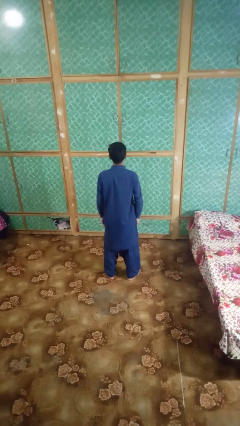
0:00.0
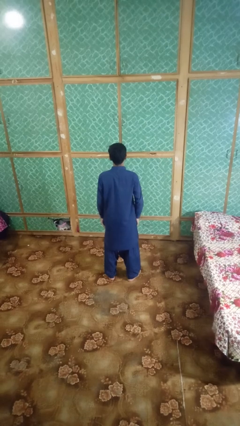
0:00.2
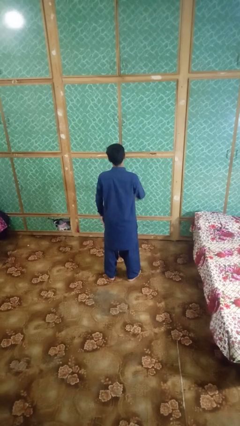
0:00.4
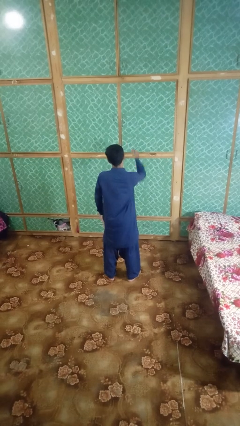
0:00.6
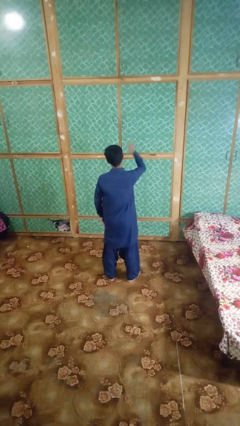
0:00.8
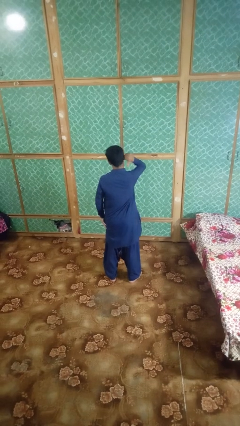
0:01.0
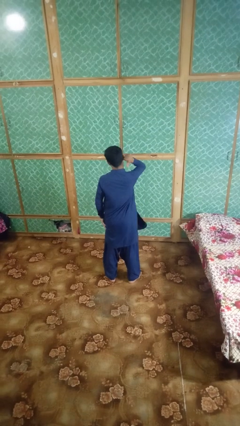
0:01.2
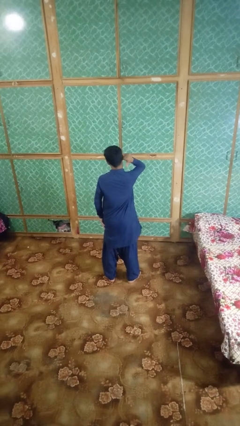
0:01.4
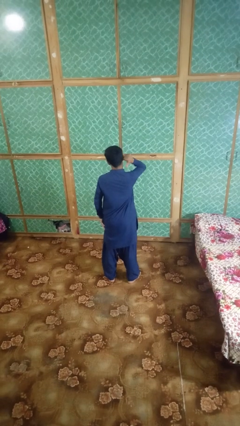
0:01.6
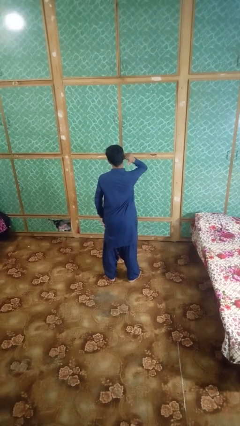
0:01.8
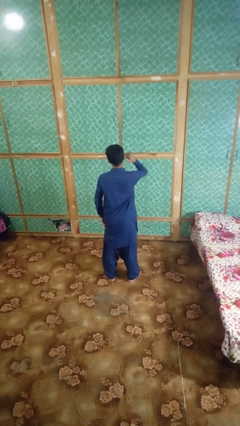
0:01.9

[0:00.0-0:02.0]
person gestures behind me

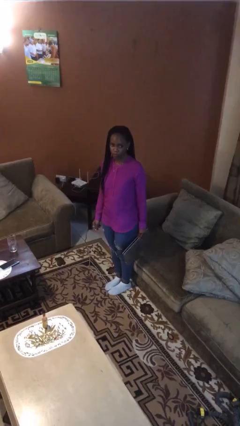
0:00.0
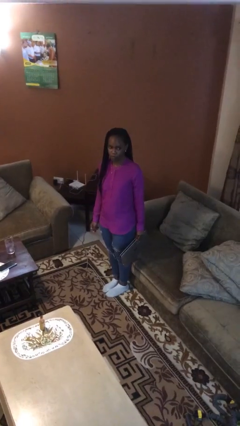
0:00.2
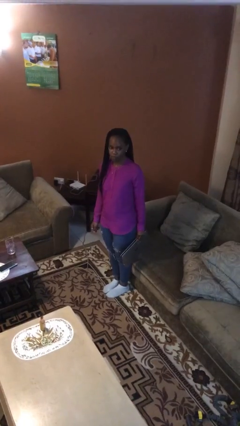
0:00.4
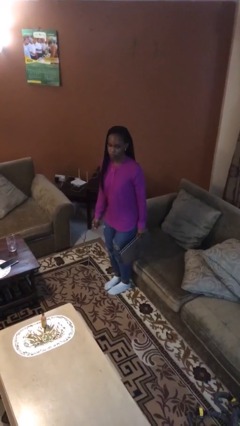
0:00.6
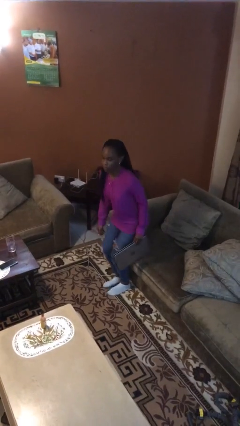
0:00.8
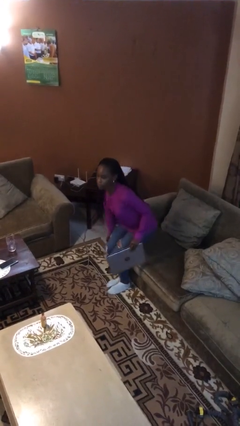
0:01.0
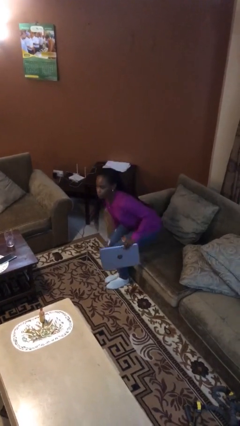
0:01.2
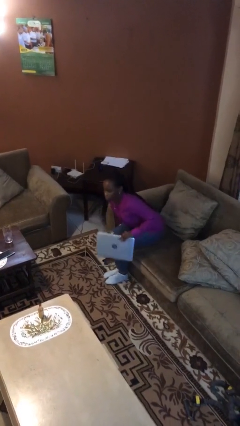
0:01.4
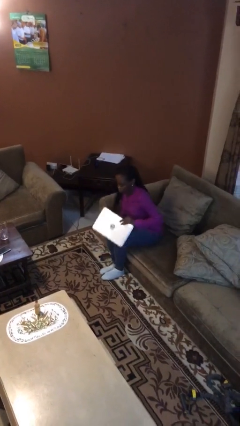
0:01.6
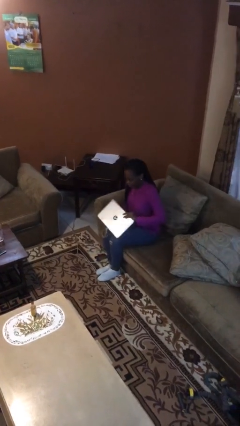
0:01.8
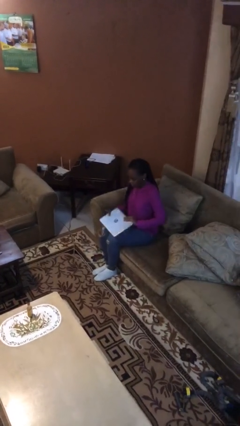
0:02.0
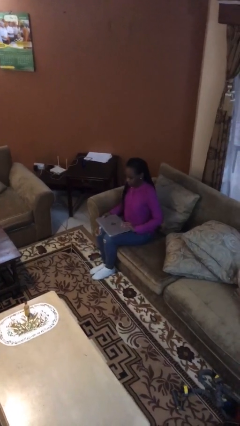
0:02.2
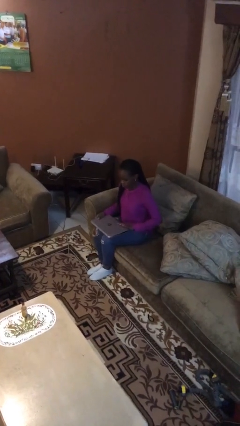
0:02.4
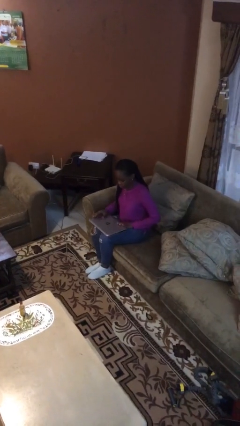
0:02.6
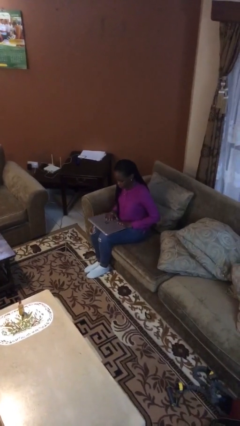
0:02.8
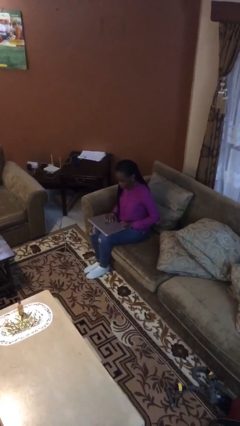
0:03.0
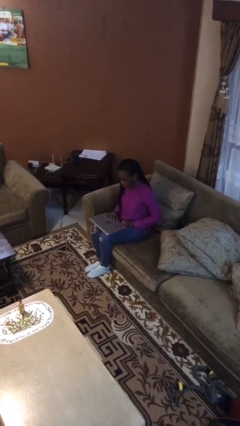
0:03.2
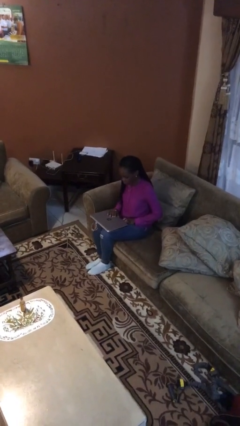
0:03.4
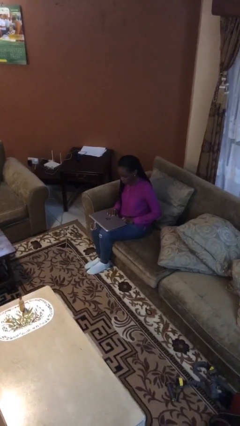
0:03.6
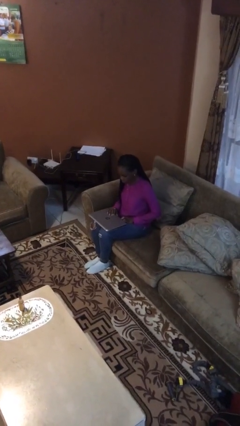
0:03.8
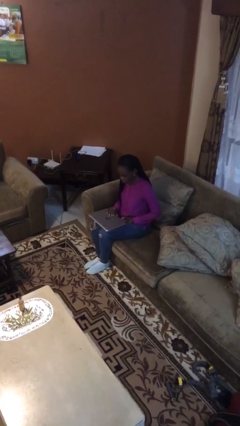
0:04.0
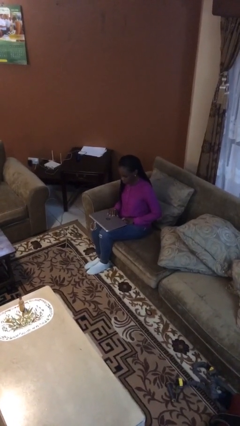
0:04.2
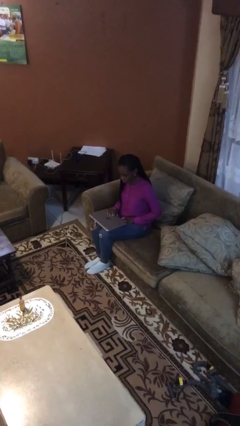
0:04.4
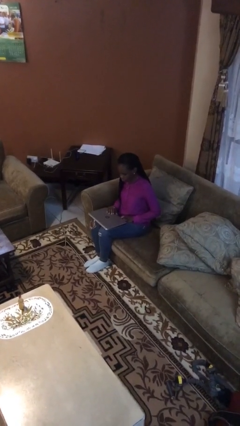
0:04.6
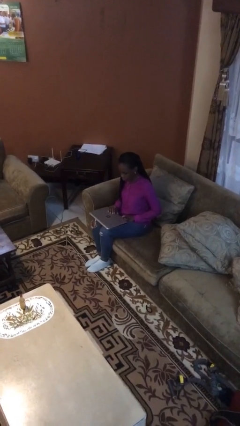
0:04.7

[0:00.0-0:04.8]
person sits down

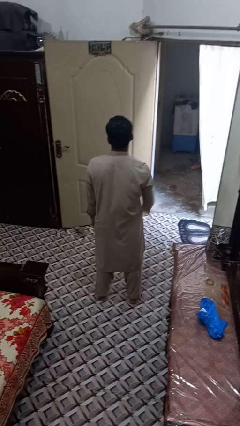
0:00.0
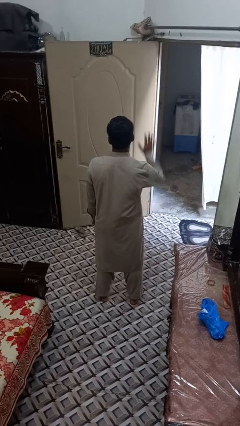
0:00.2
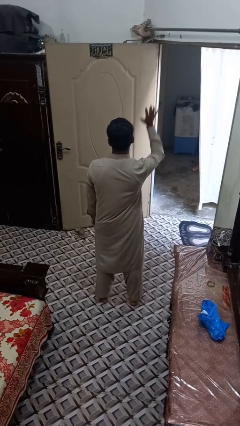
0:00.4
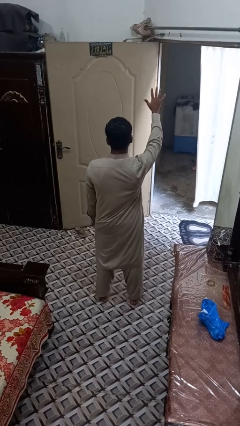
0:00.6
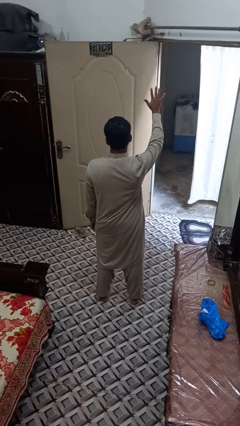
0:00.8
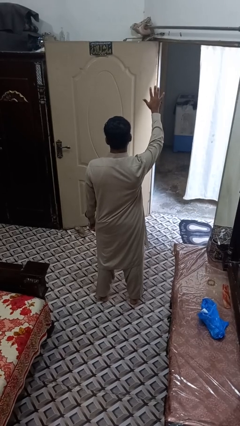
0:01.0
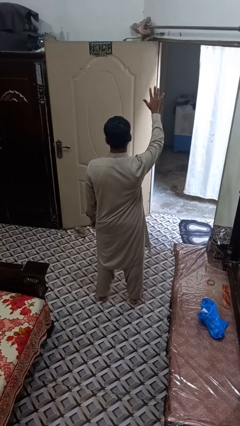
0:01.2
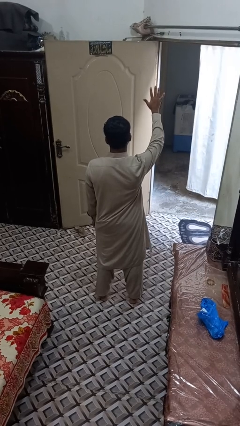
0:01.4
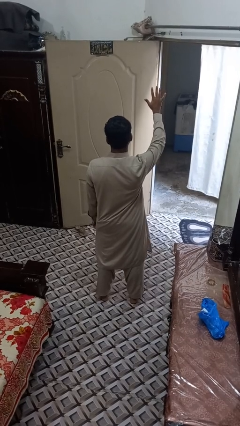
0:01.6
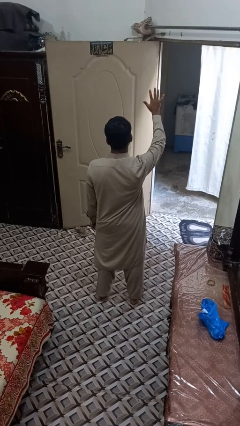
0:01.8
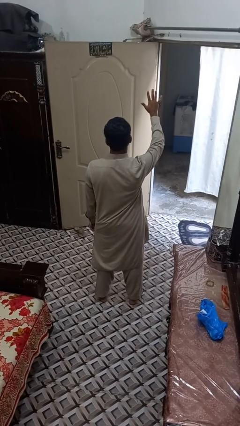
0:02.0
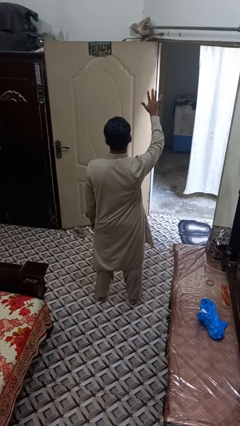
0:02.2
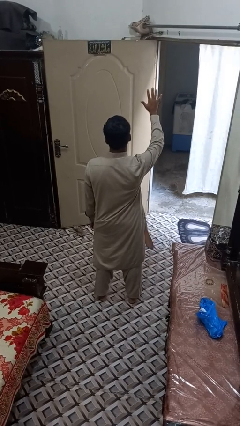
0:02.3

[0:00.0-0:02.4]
person gestures number five

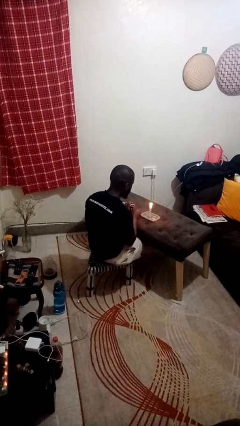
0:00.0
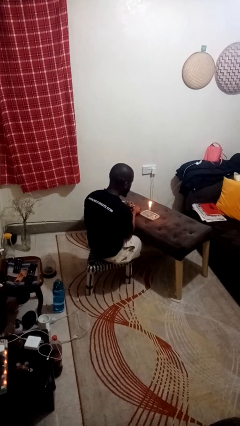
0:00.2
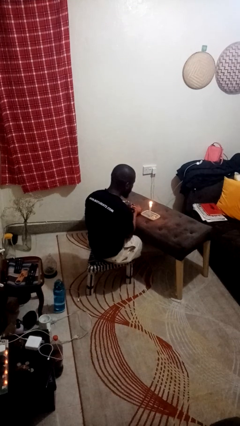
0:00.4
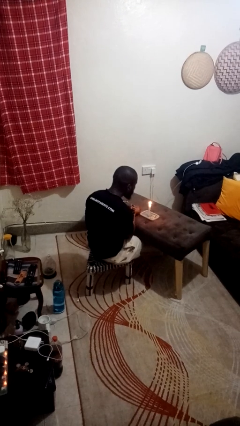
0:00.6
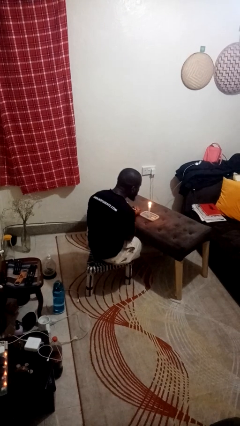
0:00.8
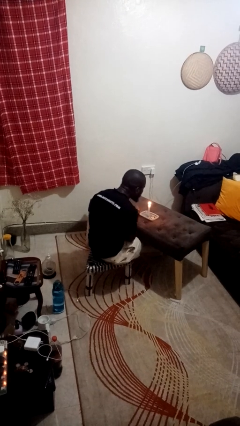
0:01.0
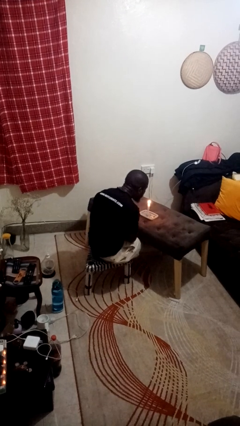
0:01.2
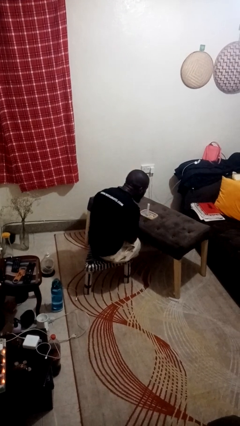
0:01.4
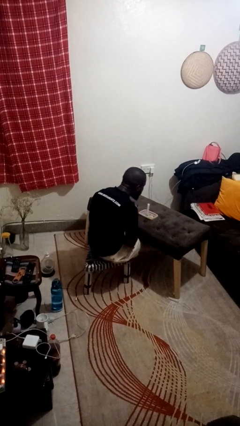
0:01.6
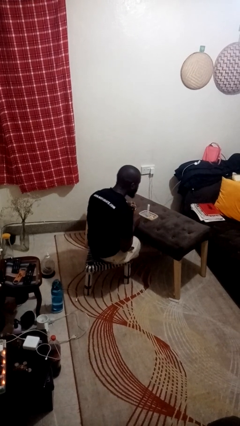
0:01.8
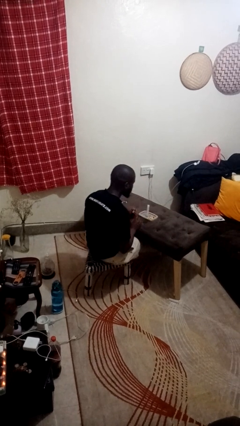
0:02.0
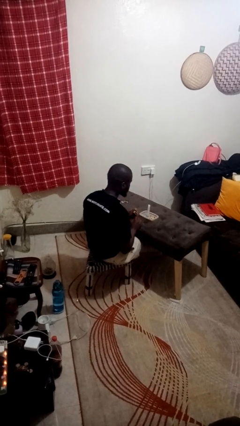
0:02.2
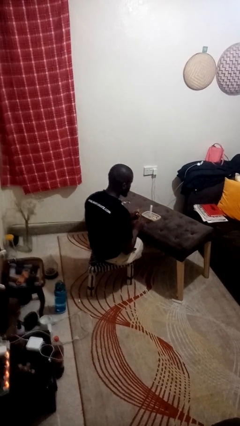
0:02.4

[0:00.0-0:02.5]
person extinguishes candle

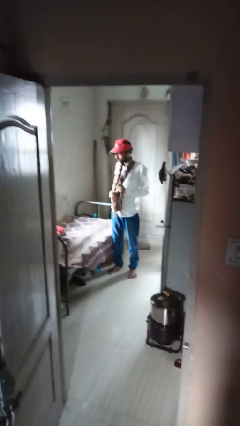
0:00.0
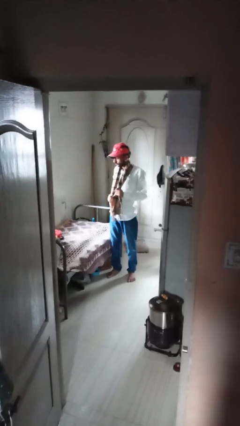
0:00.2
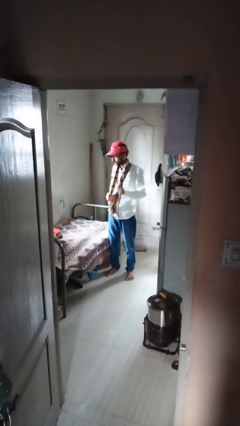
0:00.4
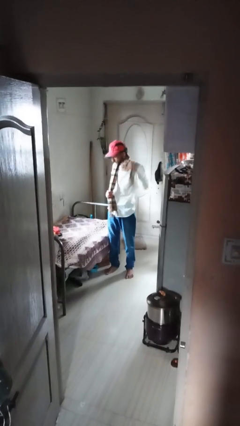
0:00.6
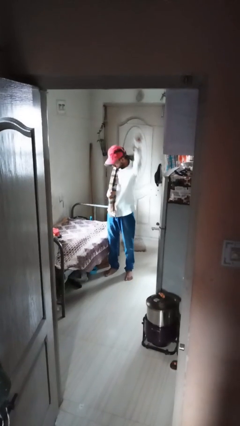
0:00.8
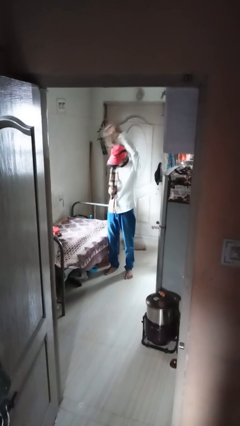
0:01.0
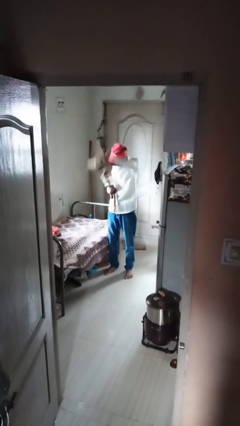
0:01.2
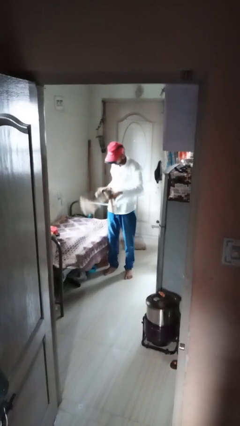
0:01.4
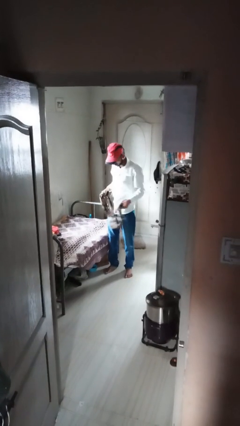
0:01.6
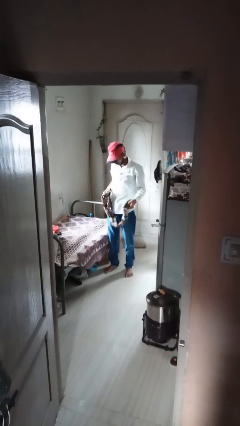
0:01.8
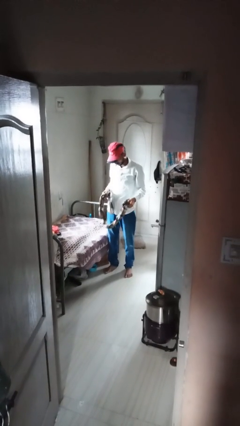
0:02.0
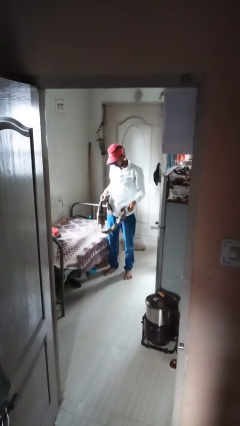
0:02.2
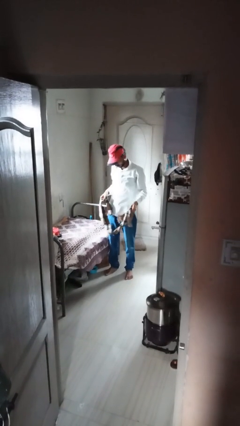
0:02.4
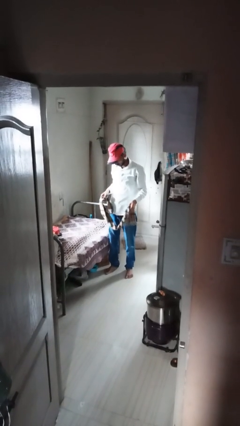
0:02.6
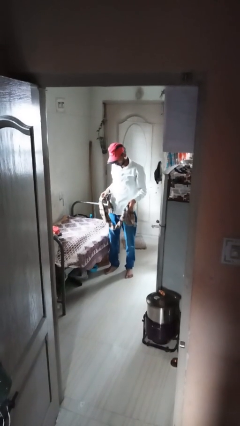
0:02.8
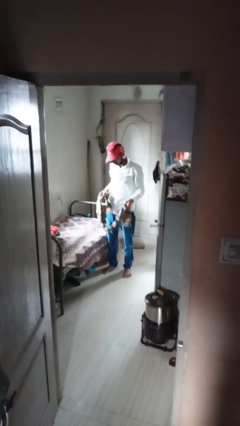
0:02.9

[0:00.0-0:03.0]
person takes off scarf

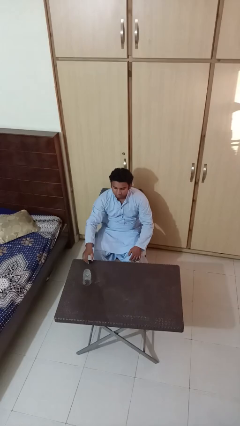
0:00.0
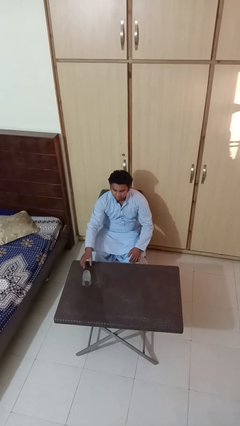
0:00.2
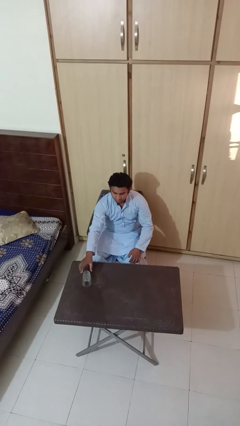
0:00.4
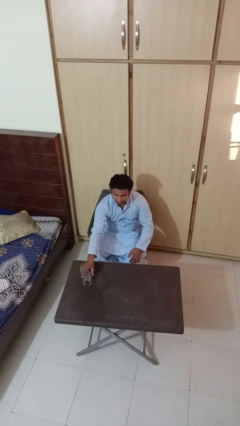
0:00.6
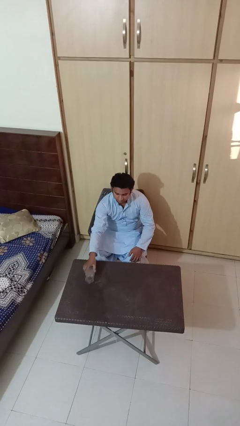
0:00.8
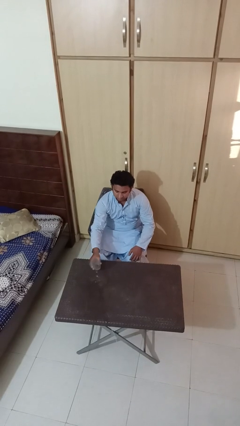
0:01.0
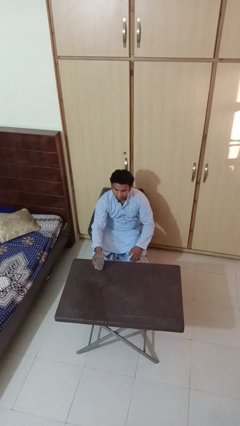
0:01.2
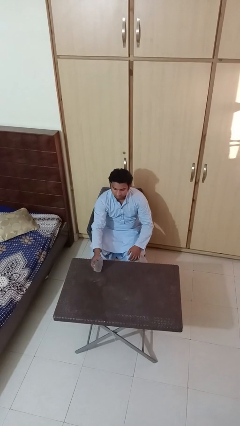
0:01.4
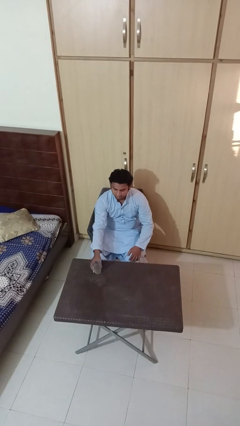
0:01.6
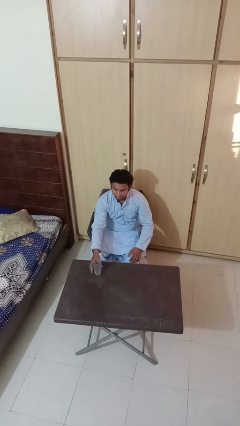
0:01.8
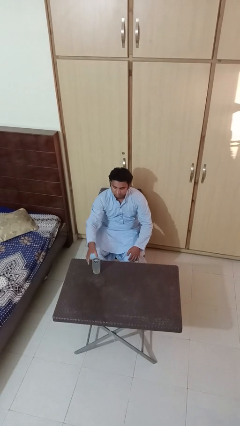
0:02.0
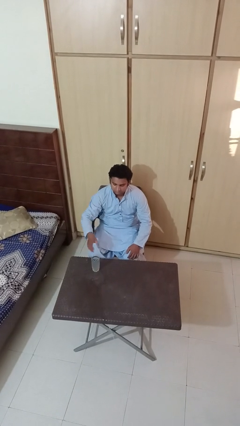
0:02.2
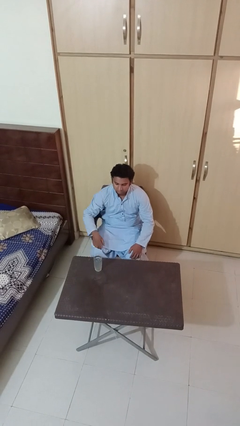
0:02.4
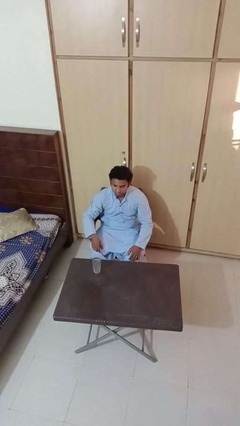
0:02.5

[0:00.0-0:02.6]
person sets upright glass
